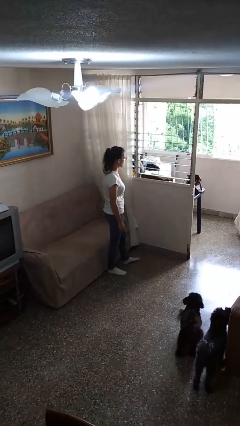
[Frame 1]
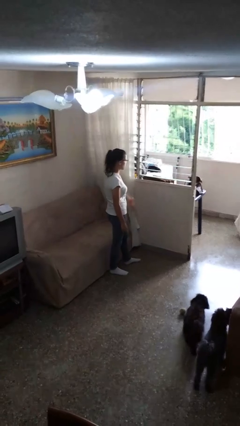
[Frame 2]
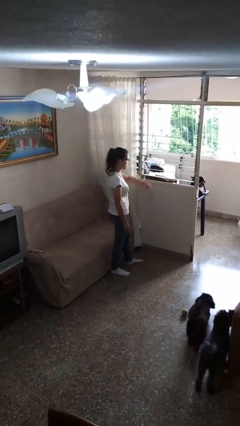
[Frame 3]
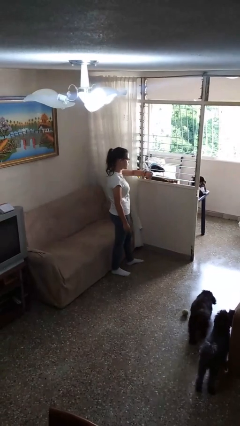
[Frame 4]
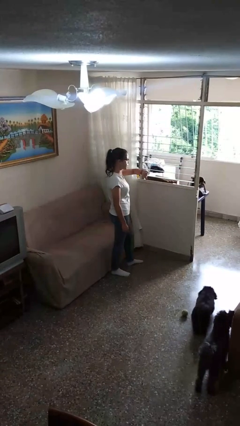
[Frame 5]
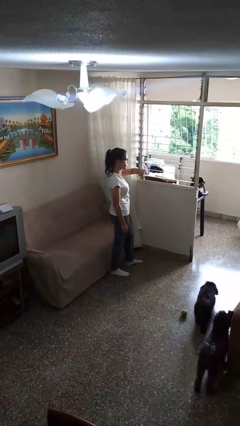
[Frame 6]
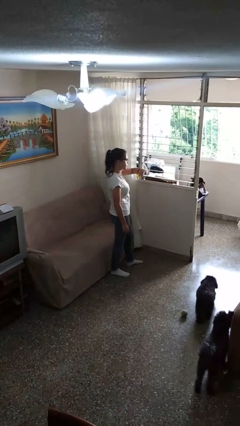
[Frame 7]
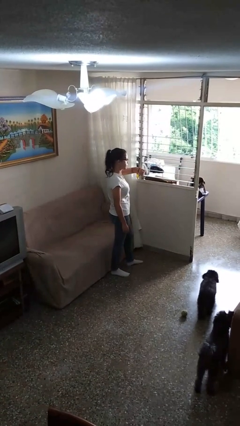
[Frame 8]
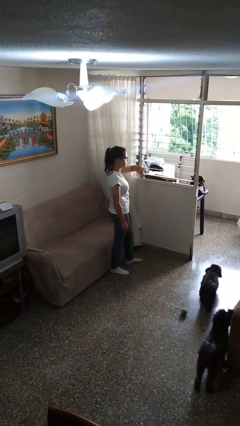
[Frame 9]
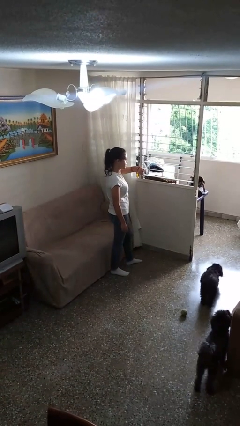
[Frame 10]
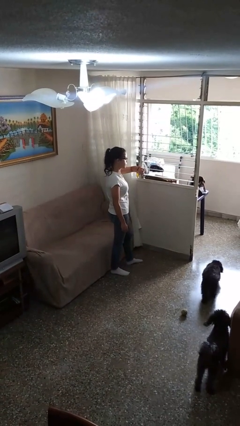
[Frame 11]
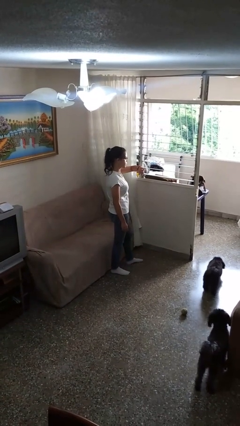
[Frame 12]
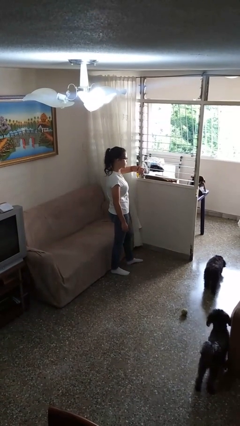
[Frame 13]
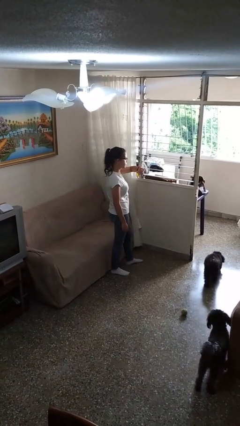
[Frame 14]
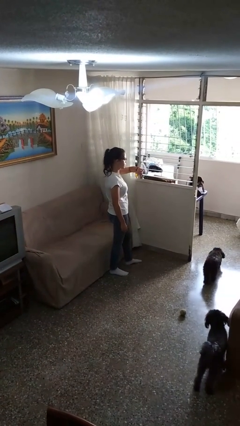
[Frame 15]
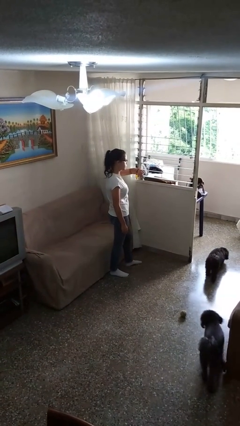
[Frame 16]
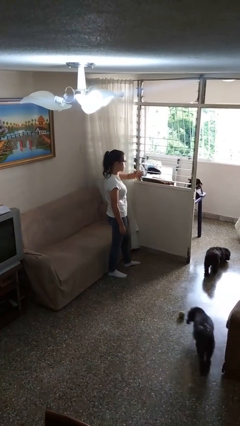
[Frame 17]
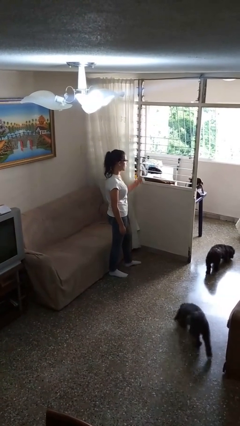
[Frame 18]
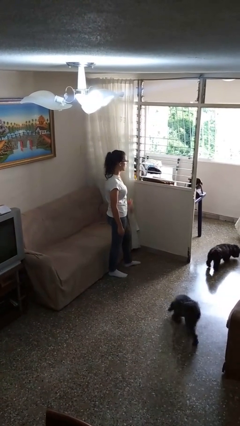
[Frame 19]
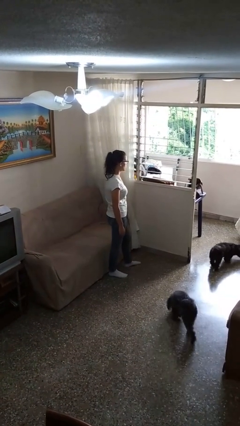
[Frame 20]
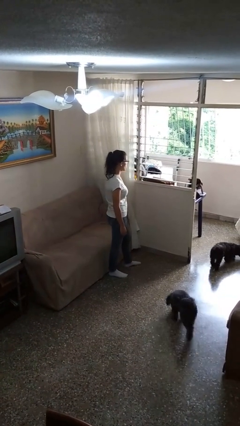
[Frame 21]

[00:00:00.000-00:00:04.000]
person looks at wristwatch

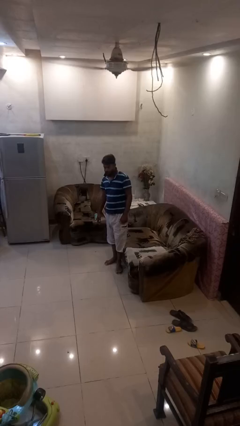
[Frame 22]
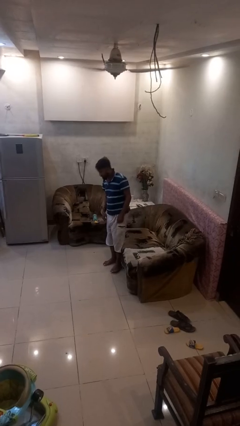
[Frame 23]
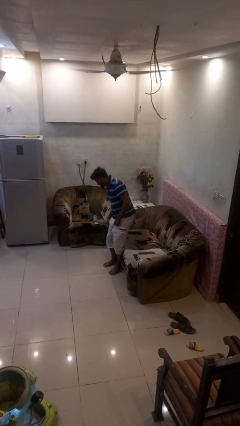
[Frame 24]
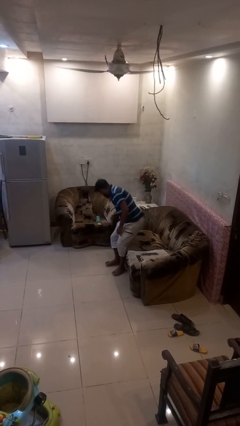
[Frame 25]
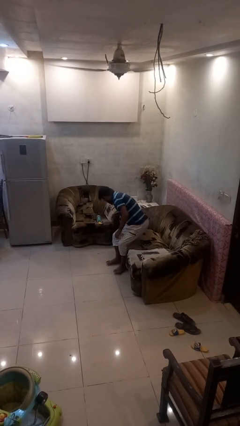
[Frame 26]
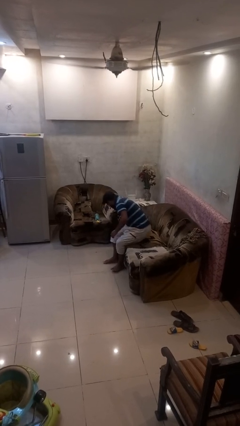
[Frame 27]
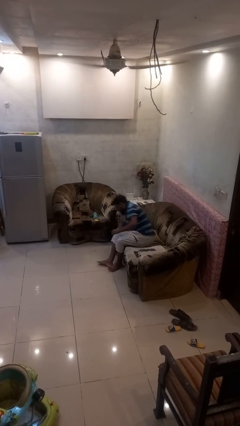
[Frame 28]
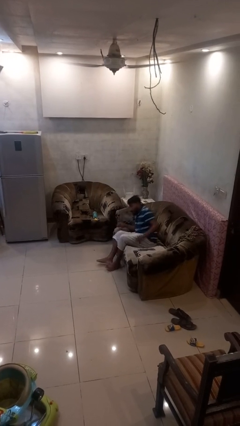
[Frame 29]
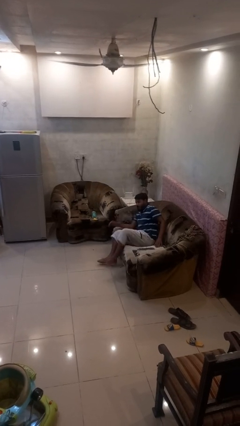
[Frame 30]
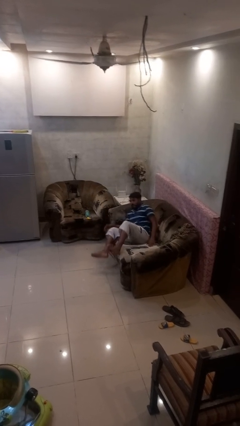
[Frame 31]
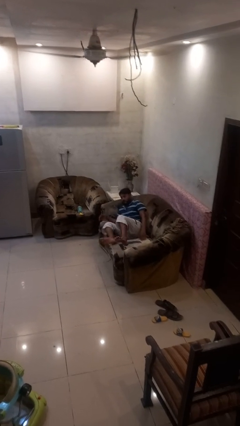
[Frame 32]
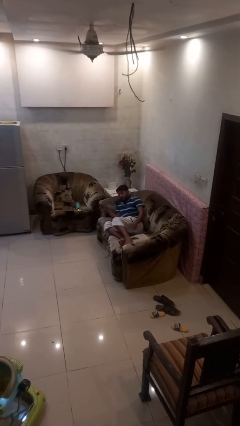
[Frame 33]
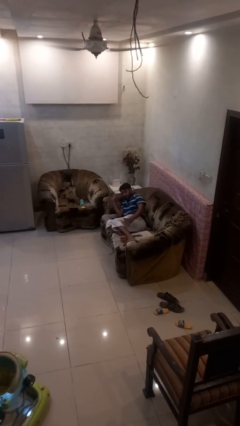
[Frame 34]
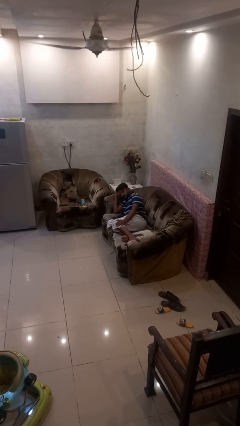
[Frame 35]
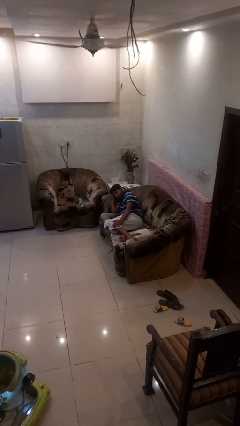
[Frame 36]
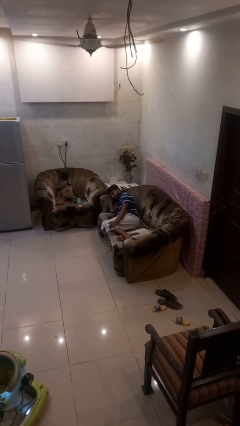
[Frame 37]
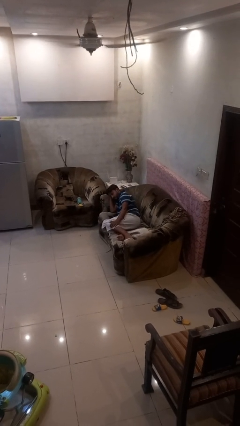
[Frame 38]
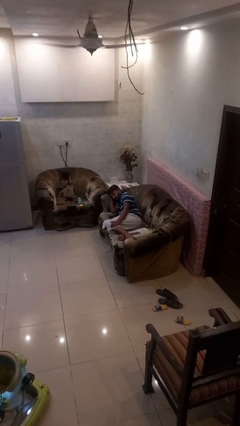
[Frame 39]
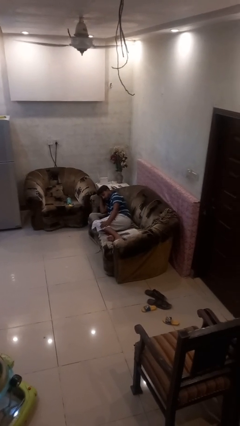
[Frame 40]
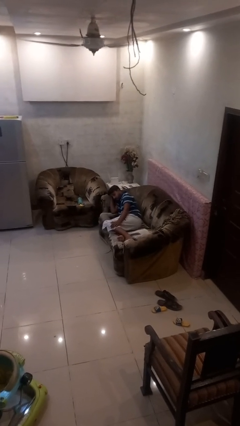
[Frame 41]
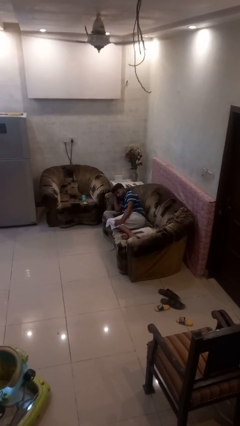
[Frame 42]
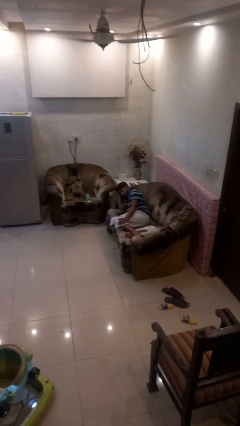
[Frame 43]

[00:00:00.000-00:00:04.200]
person lies down on couch

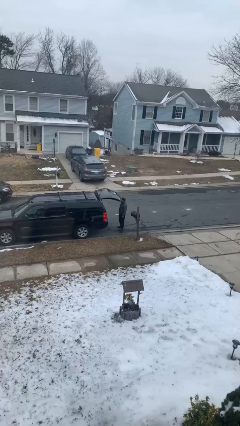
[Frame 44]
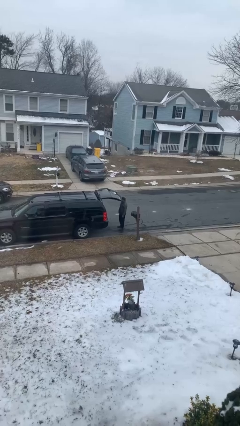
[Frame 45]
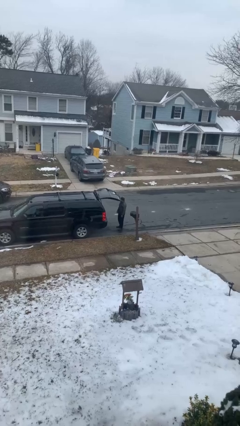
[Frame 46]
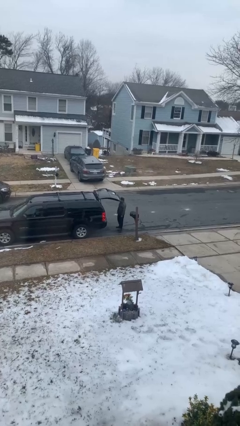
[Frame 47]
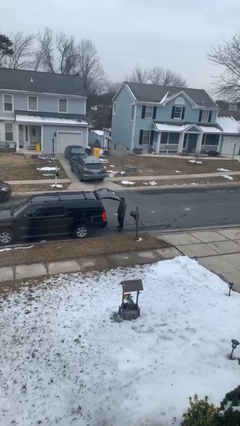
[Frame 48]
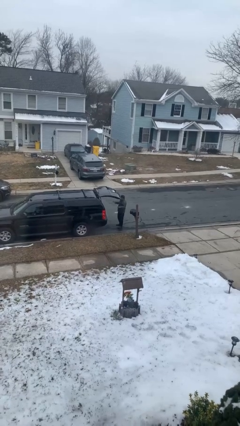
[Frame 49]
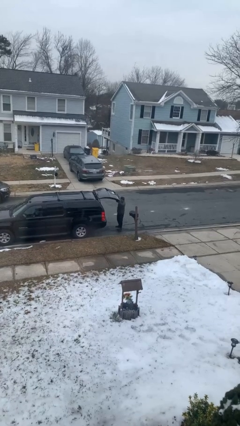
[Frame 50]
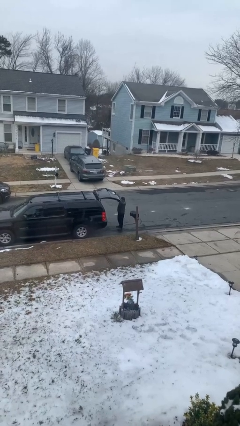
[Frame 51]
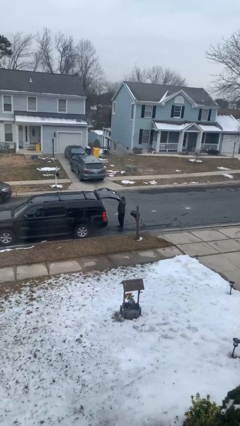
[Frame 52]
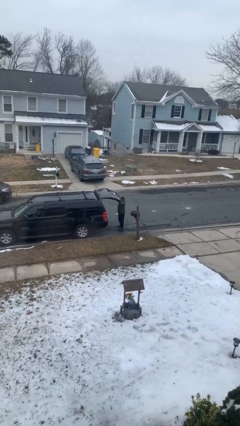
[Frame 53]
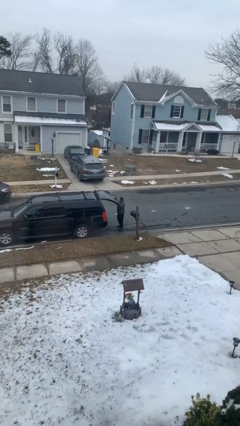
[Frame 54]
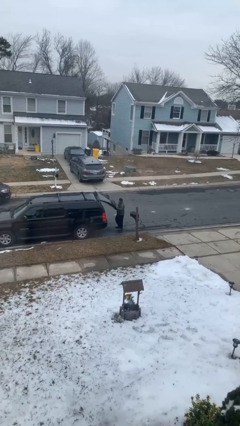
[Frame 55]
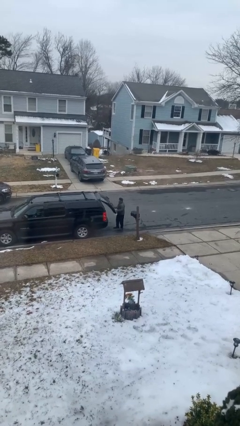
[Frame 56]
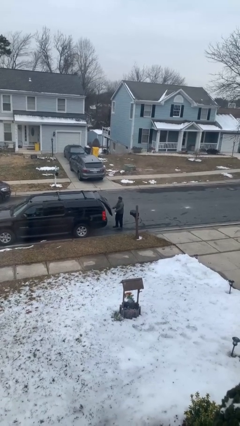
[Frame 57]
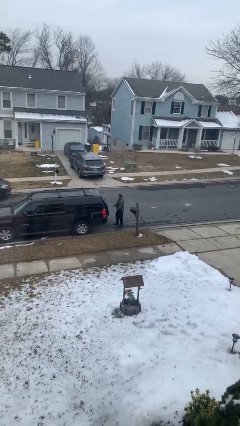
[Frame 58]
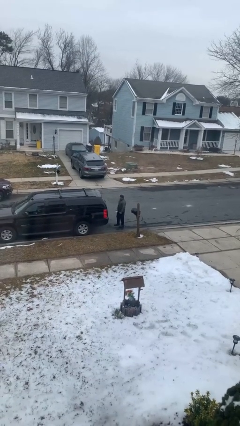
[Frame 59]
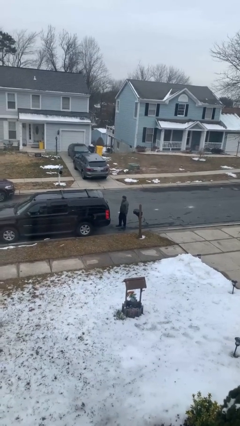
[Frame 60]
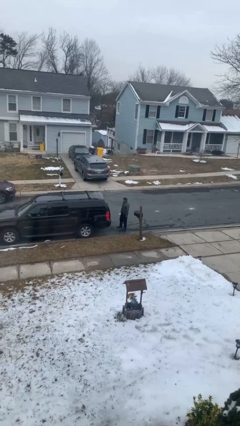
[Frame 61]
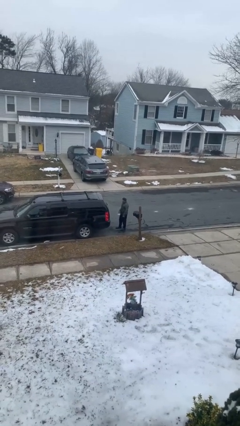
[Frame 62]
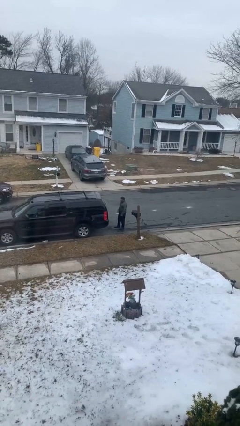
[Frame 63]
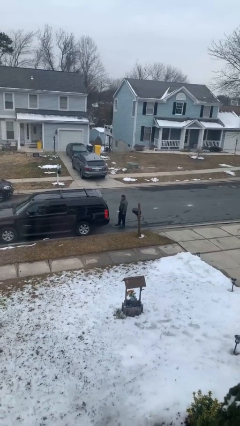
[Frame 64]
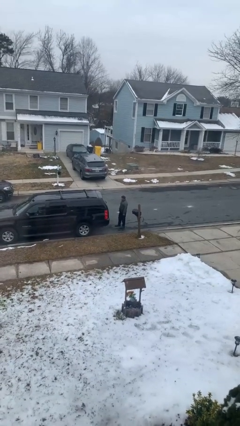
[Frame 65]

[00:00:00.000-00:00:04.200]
person closes car trunk

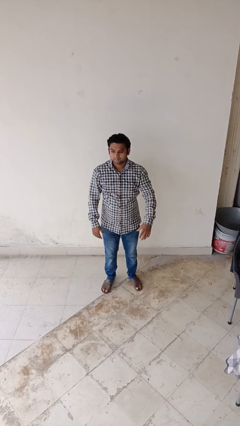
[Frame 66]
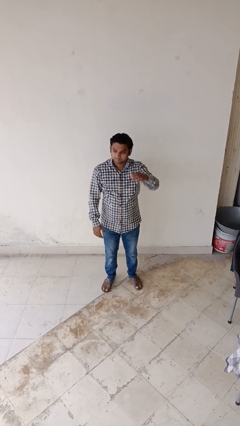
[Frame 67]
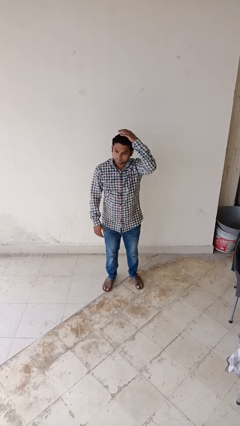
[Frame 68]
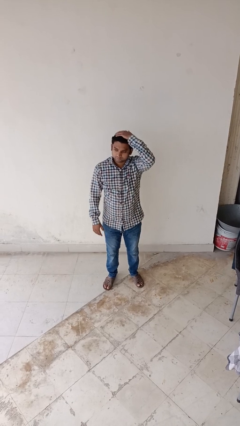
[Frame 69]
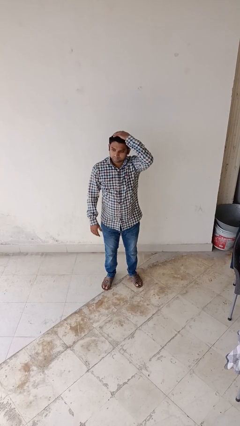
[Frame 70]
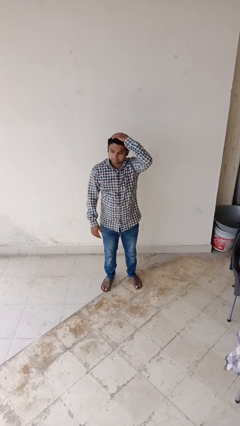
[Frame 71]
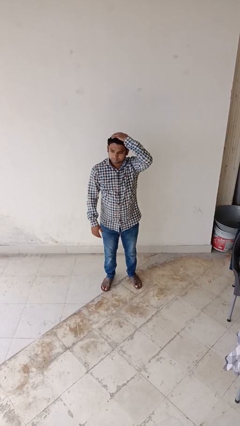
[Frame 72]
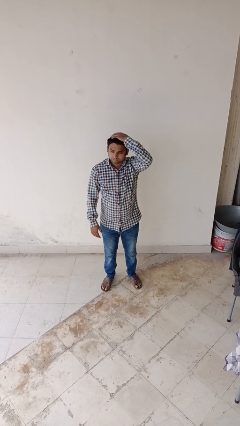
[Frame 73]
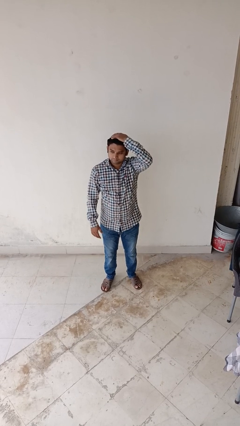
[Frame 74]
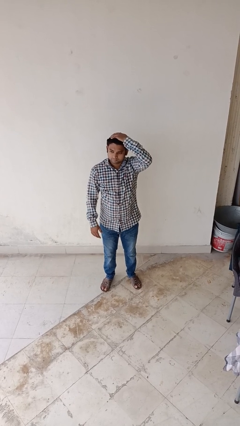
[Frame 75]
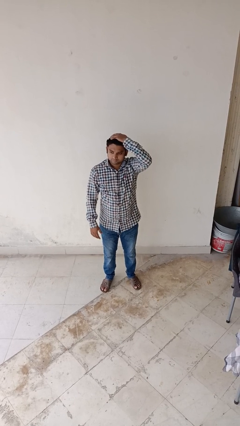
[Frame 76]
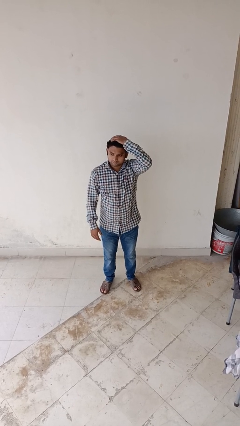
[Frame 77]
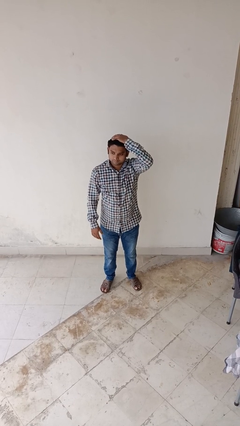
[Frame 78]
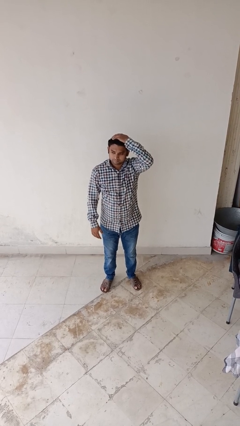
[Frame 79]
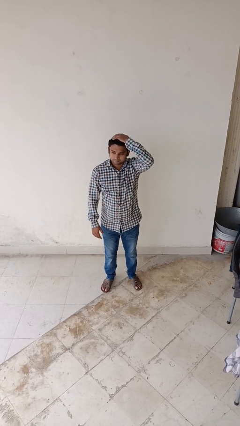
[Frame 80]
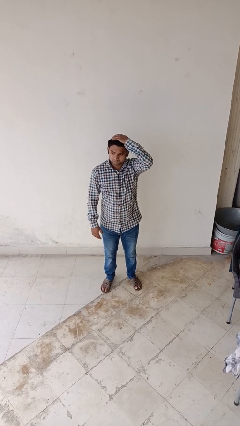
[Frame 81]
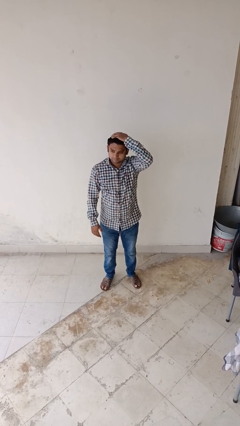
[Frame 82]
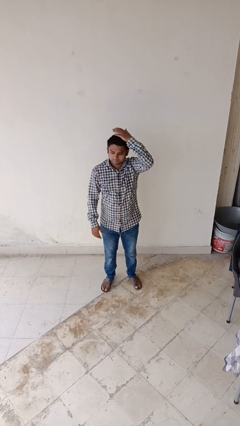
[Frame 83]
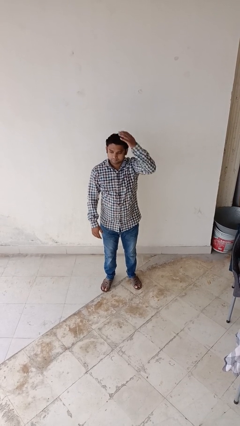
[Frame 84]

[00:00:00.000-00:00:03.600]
person pats head

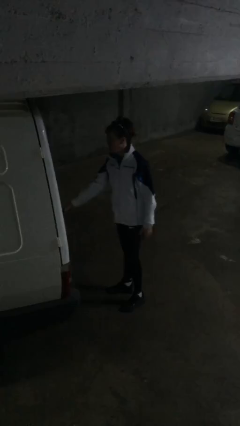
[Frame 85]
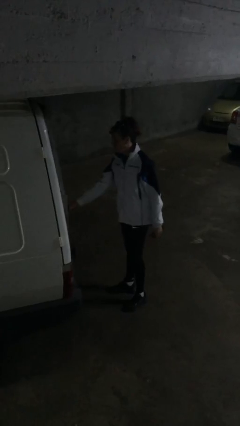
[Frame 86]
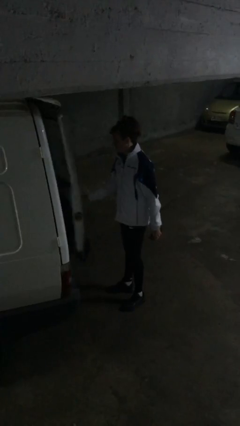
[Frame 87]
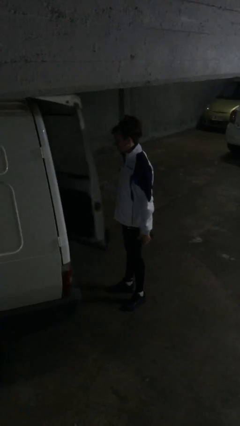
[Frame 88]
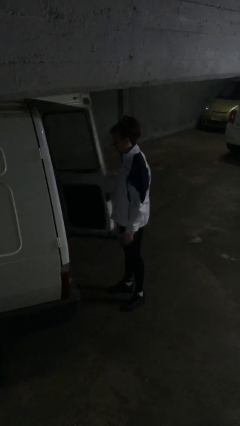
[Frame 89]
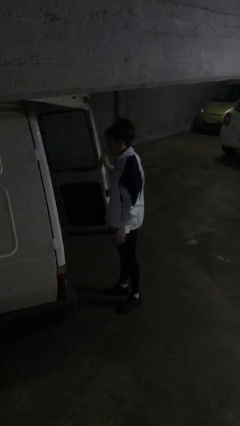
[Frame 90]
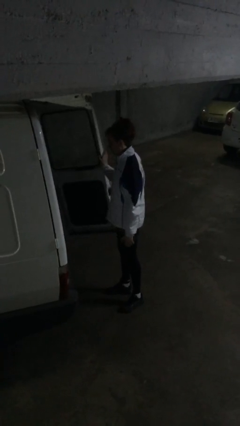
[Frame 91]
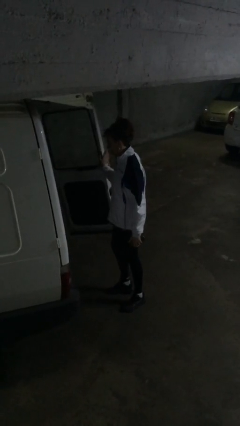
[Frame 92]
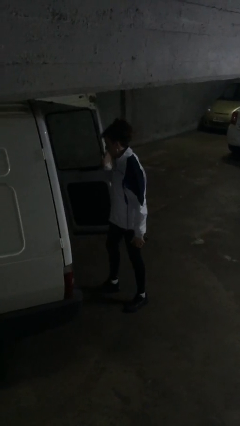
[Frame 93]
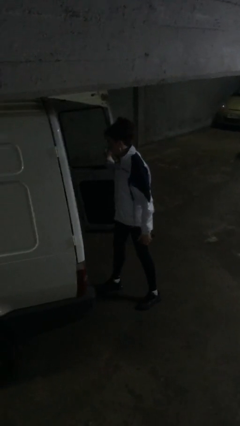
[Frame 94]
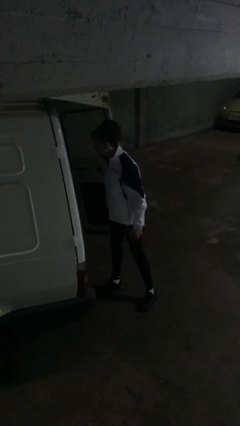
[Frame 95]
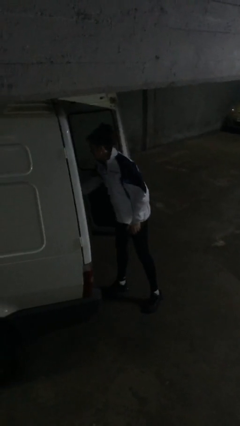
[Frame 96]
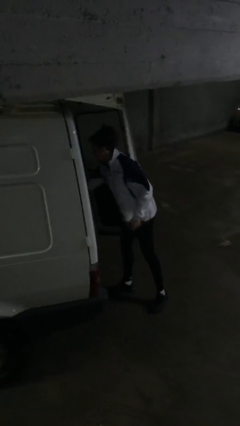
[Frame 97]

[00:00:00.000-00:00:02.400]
person opens car door
